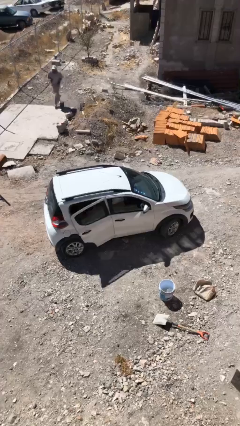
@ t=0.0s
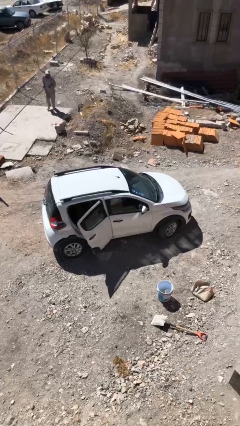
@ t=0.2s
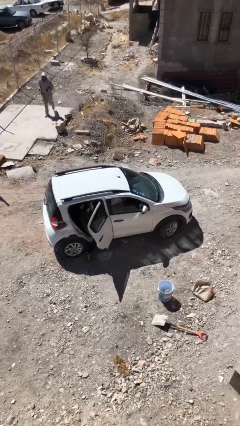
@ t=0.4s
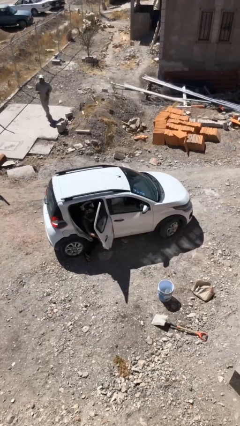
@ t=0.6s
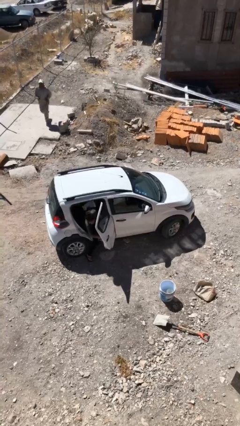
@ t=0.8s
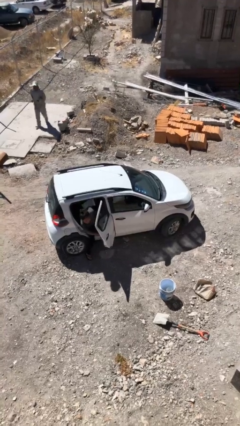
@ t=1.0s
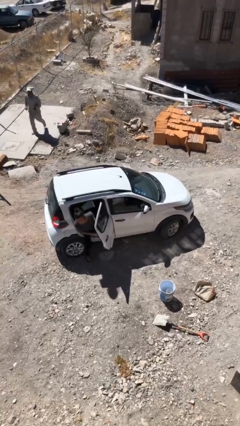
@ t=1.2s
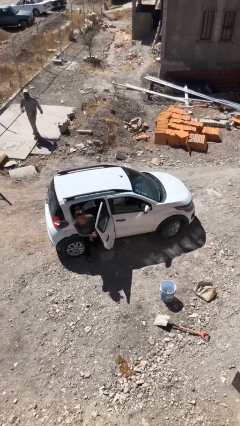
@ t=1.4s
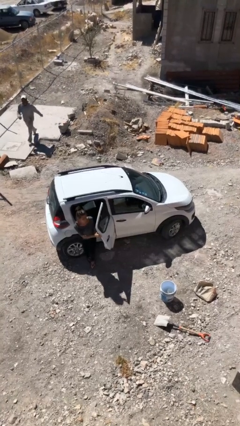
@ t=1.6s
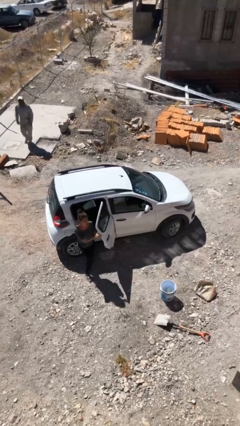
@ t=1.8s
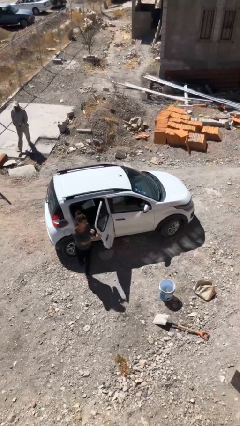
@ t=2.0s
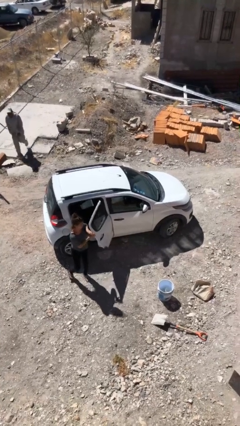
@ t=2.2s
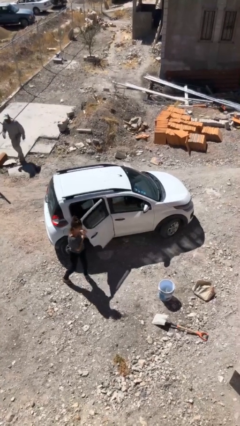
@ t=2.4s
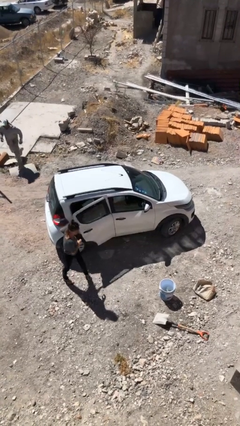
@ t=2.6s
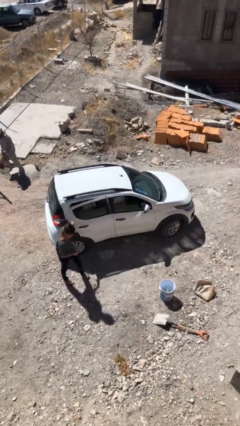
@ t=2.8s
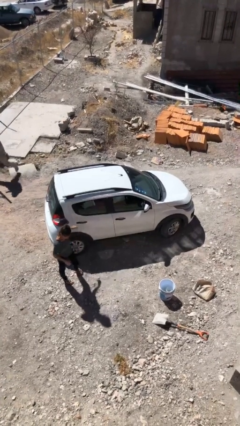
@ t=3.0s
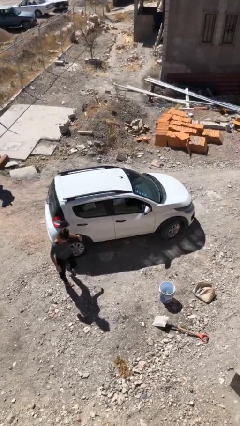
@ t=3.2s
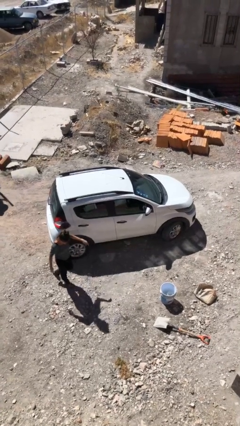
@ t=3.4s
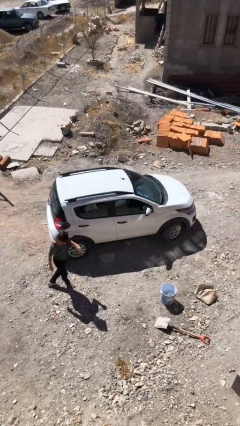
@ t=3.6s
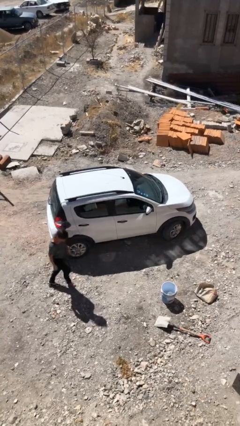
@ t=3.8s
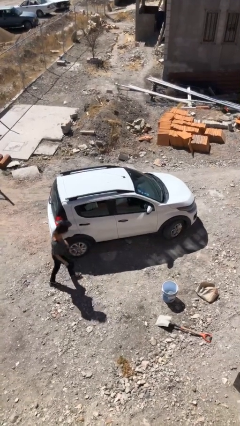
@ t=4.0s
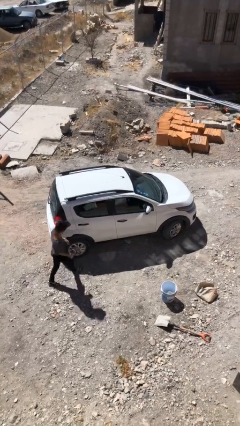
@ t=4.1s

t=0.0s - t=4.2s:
car drops off person

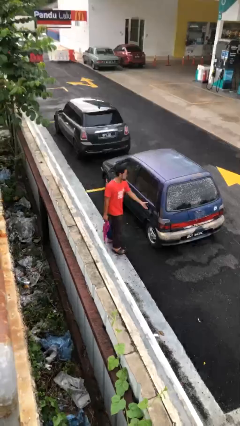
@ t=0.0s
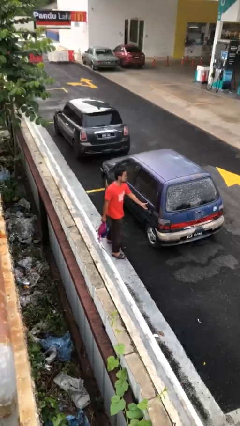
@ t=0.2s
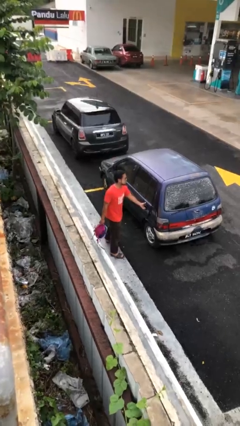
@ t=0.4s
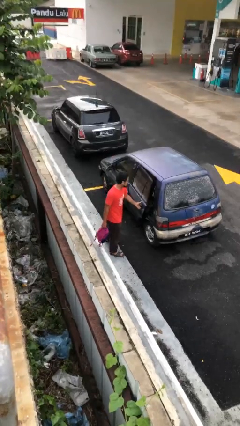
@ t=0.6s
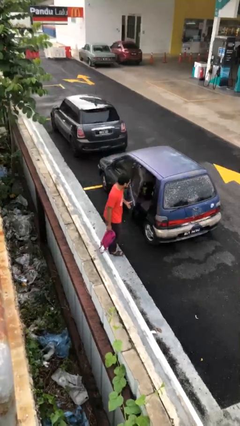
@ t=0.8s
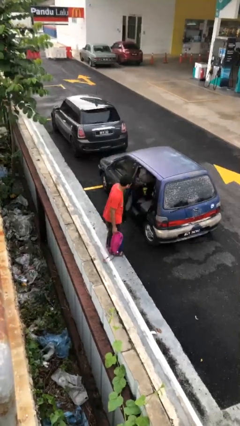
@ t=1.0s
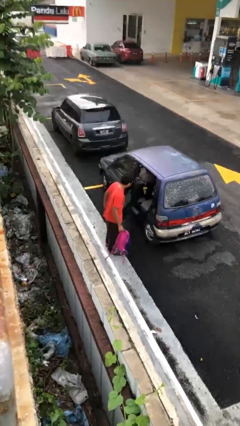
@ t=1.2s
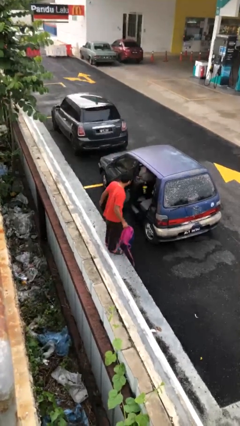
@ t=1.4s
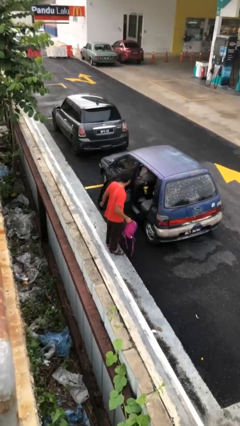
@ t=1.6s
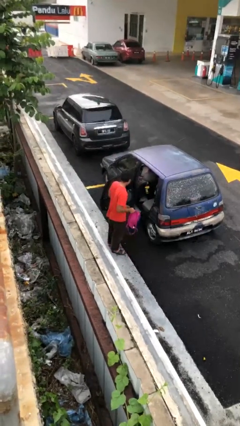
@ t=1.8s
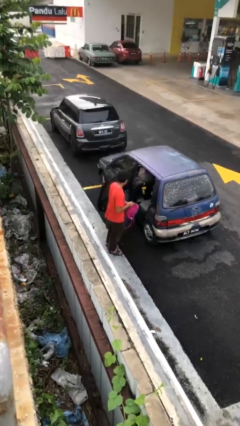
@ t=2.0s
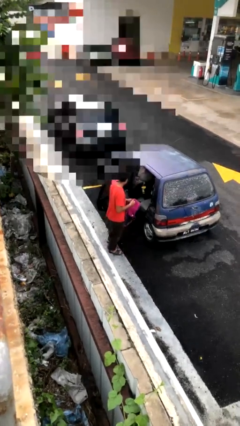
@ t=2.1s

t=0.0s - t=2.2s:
person opens car door

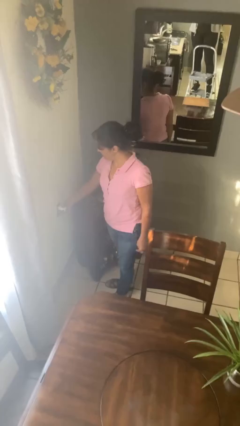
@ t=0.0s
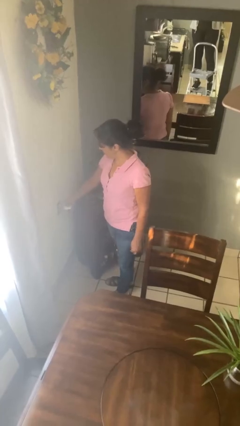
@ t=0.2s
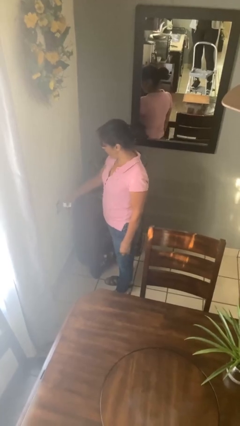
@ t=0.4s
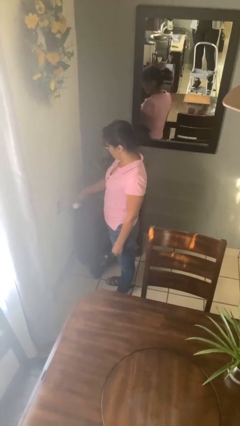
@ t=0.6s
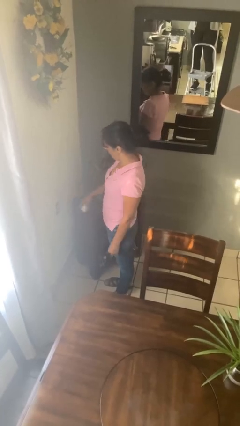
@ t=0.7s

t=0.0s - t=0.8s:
person unplugs from electrical socket

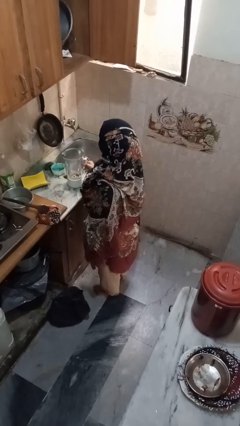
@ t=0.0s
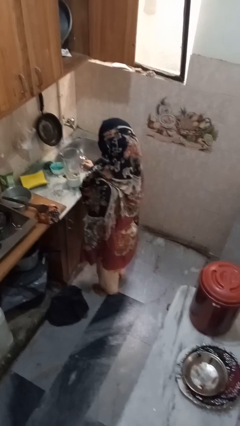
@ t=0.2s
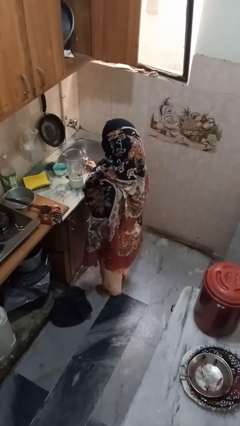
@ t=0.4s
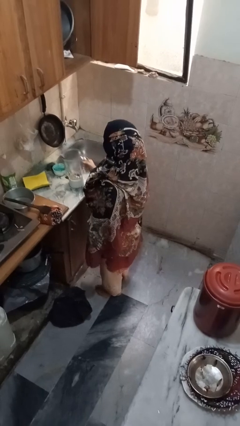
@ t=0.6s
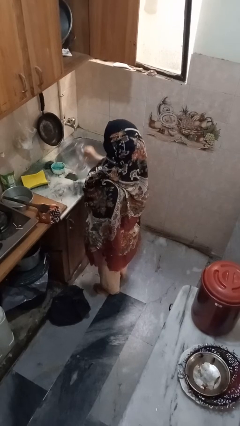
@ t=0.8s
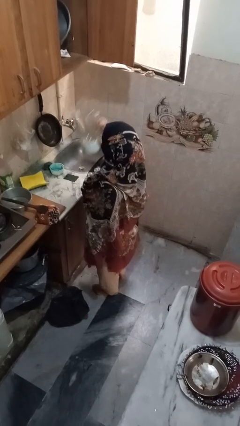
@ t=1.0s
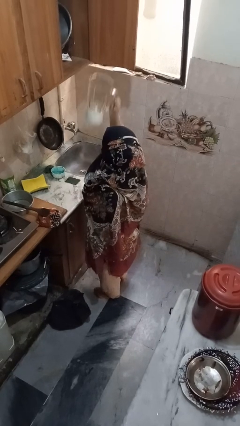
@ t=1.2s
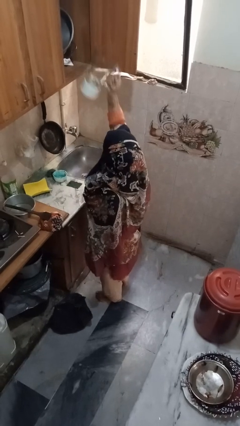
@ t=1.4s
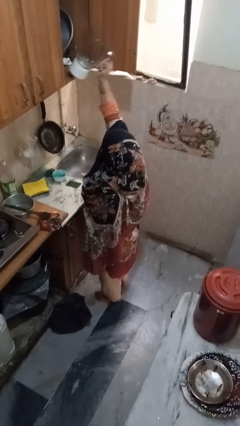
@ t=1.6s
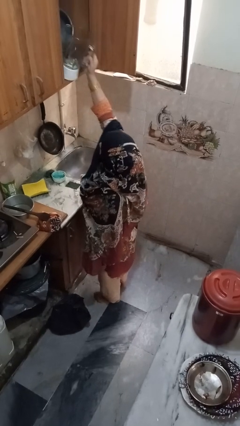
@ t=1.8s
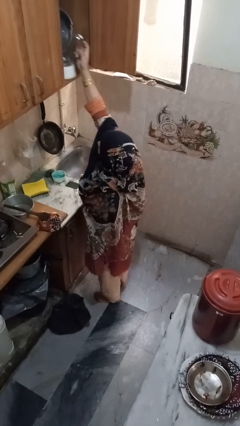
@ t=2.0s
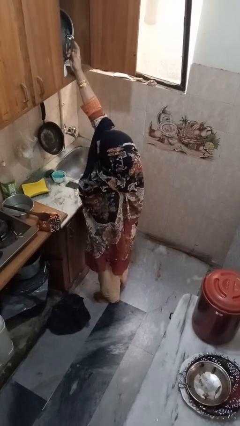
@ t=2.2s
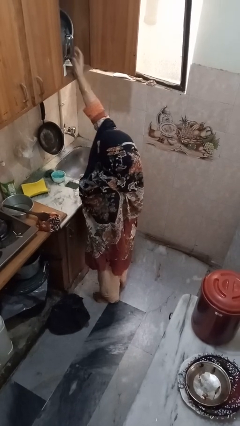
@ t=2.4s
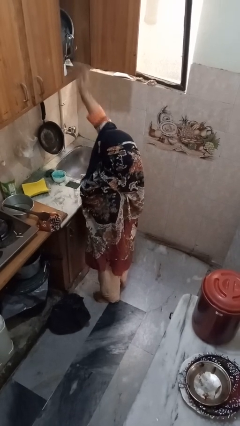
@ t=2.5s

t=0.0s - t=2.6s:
person takes object from cabinet

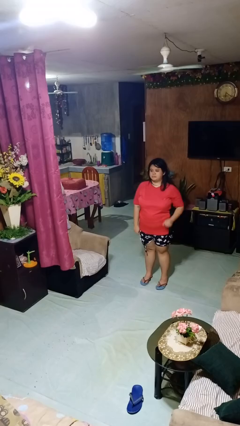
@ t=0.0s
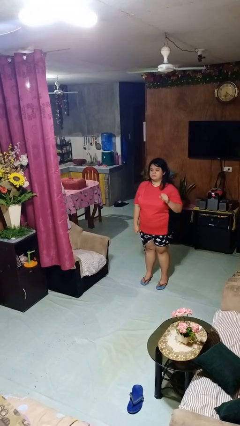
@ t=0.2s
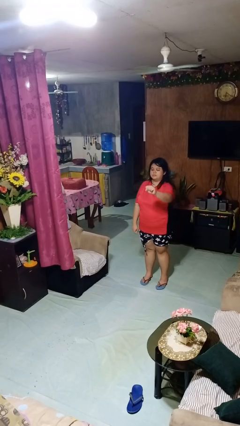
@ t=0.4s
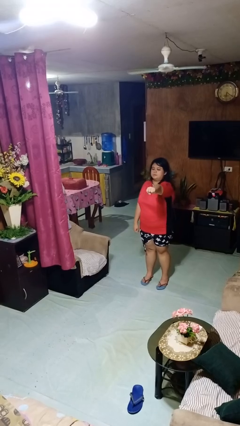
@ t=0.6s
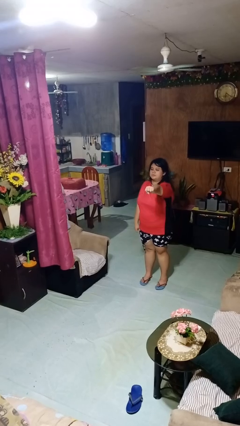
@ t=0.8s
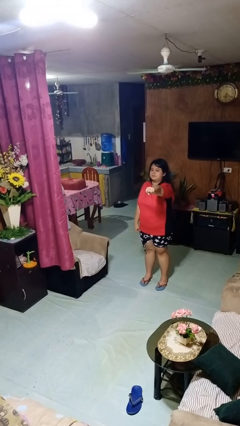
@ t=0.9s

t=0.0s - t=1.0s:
person punches

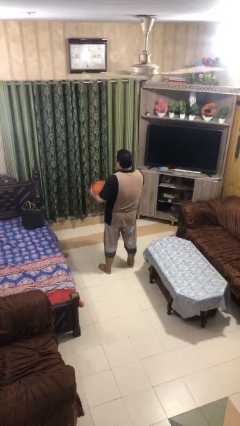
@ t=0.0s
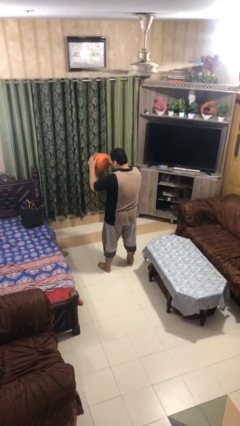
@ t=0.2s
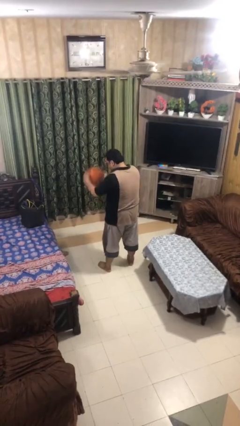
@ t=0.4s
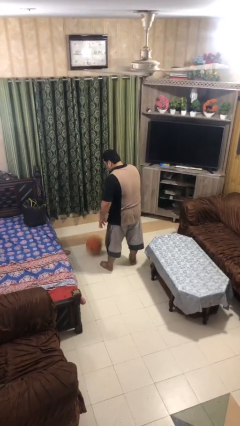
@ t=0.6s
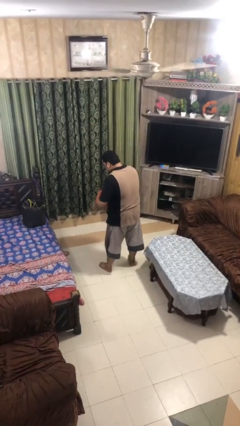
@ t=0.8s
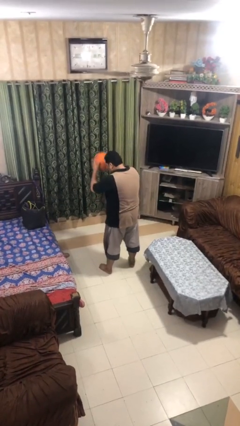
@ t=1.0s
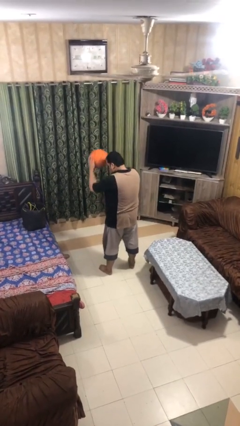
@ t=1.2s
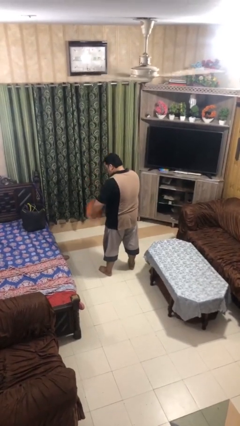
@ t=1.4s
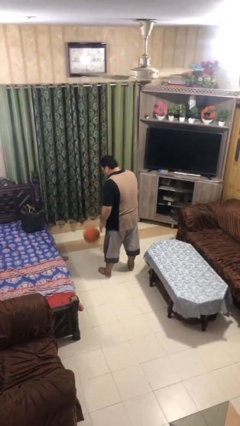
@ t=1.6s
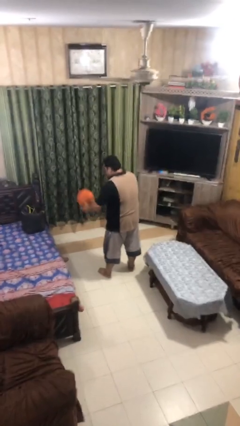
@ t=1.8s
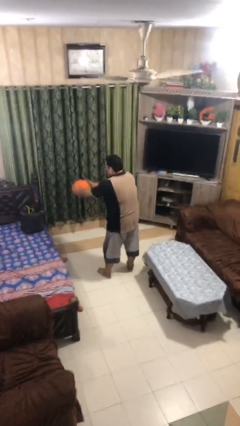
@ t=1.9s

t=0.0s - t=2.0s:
person bounces ball on floor

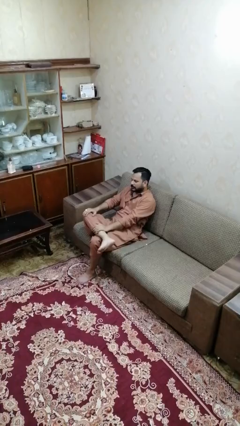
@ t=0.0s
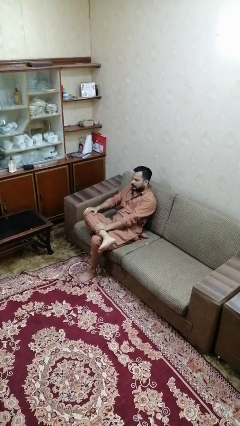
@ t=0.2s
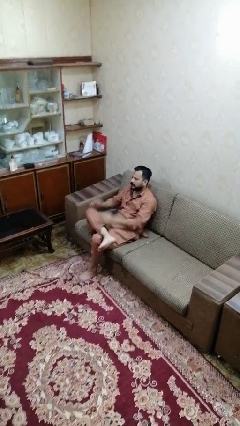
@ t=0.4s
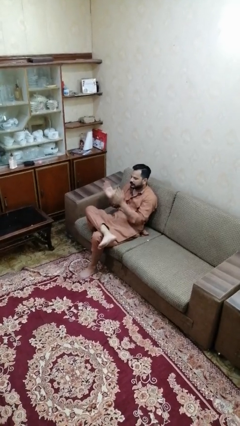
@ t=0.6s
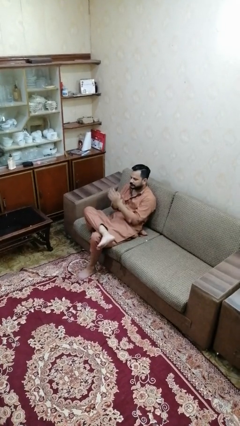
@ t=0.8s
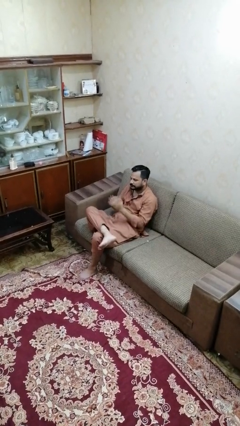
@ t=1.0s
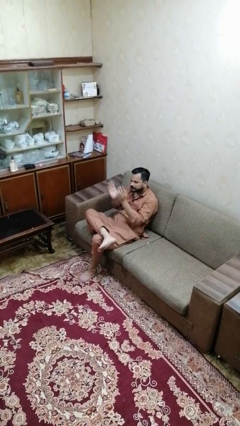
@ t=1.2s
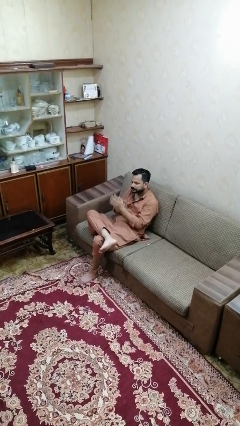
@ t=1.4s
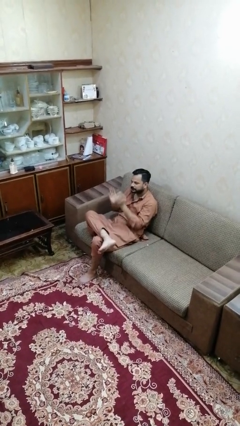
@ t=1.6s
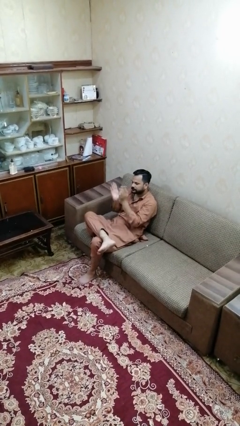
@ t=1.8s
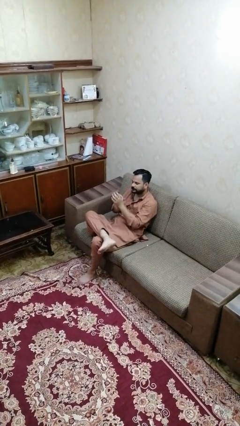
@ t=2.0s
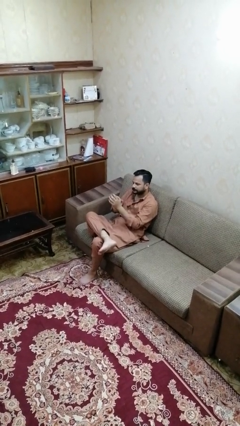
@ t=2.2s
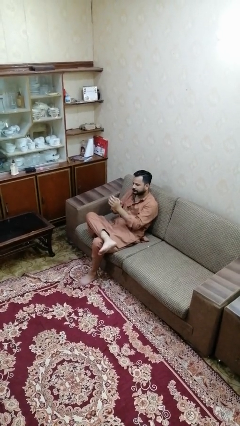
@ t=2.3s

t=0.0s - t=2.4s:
person claps hands

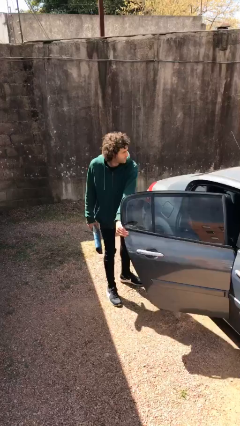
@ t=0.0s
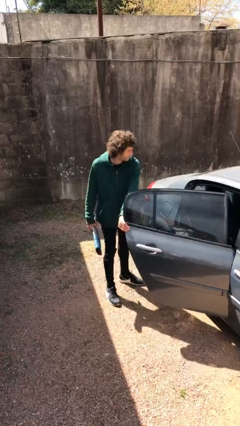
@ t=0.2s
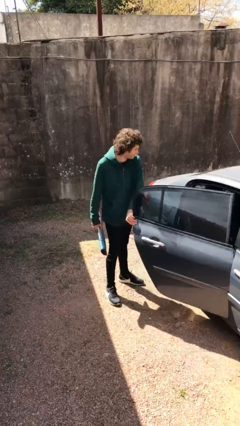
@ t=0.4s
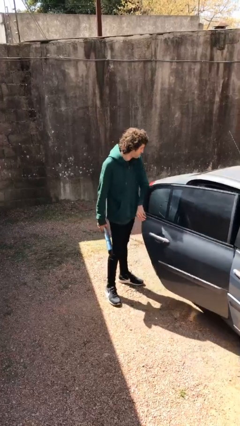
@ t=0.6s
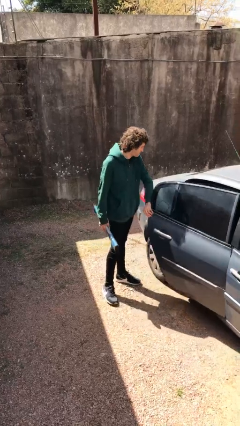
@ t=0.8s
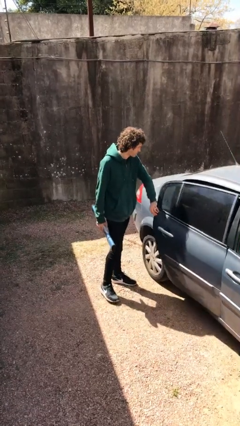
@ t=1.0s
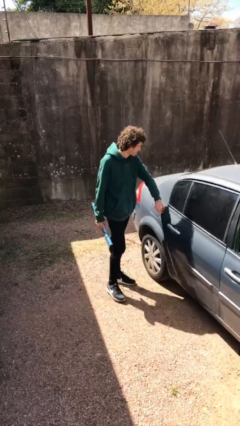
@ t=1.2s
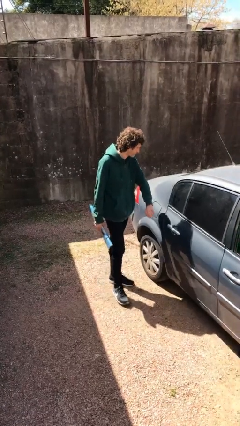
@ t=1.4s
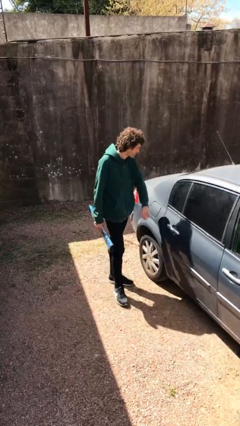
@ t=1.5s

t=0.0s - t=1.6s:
person closes car door

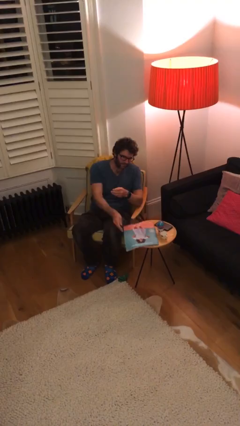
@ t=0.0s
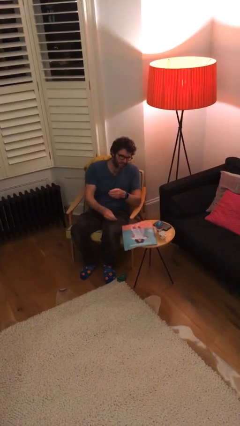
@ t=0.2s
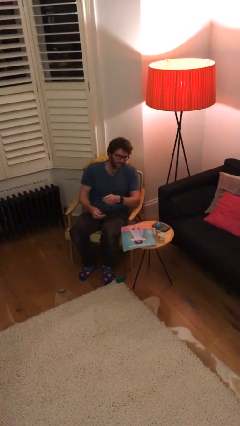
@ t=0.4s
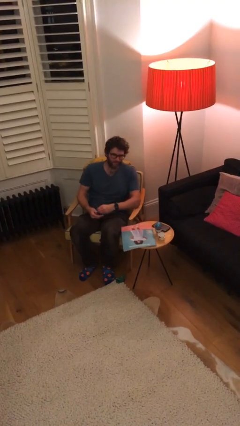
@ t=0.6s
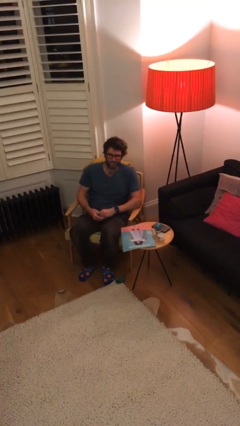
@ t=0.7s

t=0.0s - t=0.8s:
person puts down object on table
